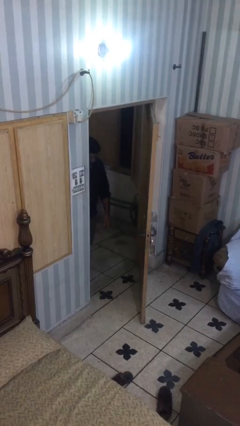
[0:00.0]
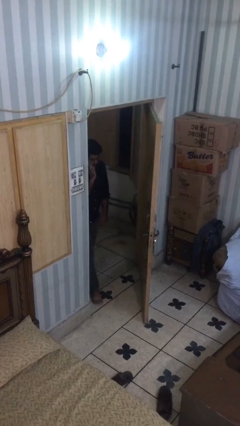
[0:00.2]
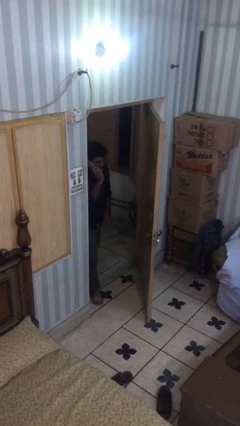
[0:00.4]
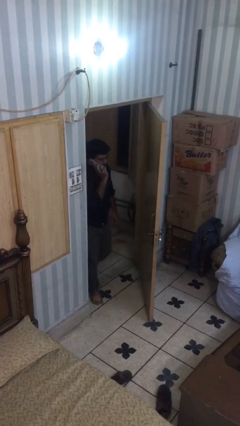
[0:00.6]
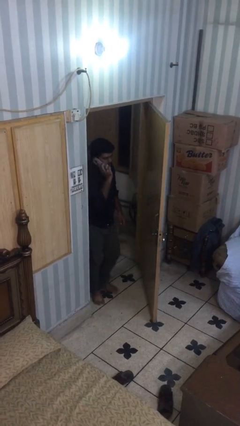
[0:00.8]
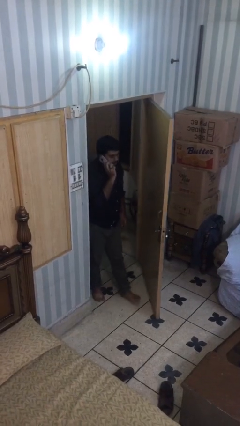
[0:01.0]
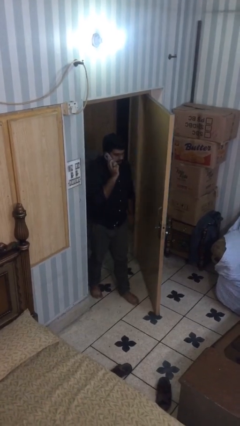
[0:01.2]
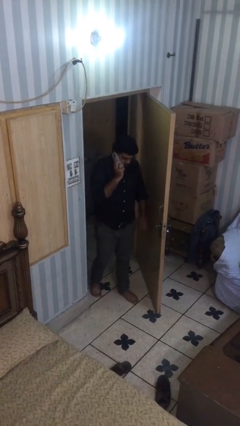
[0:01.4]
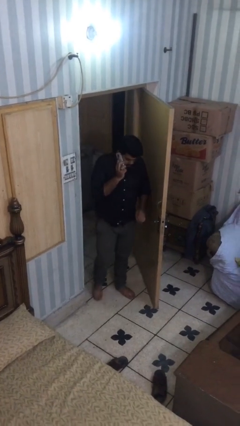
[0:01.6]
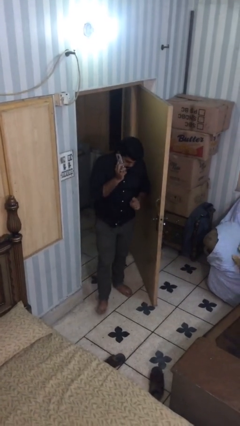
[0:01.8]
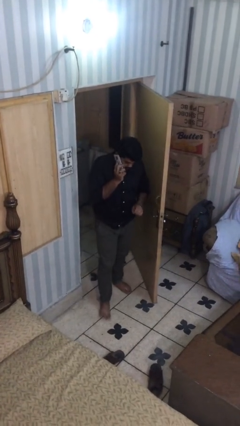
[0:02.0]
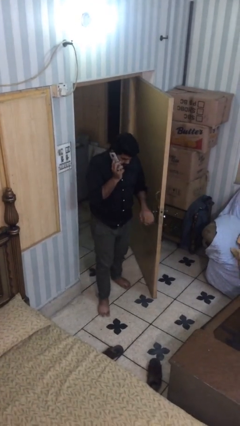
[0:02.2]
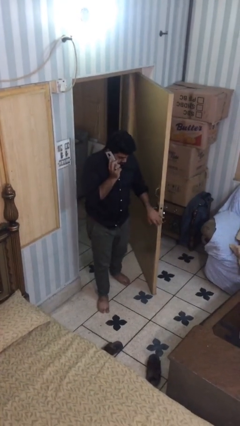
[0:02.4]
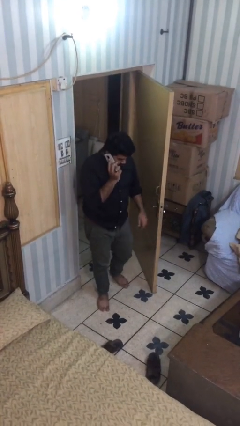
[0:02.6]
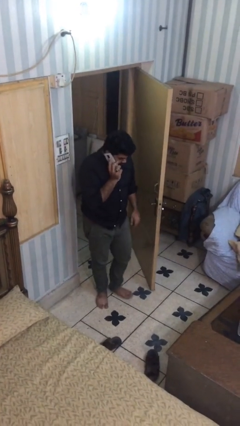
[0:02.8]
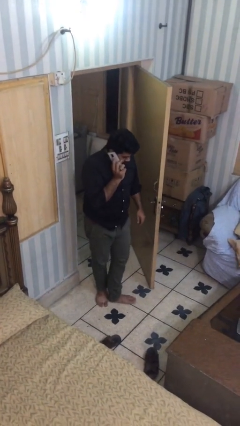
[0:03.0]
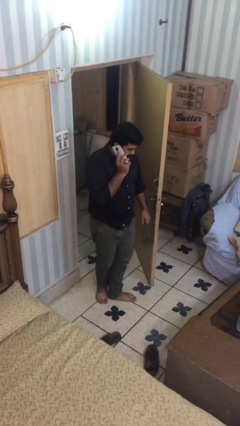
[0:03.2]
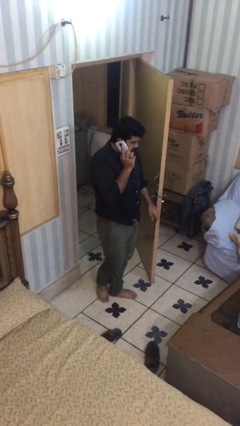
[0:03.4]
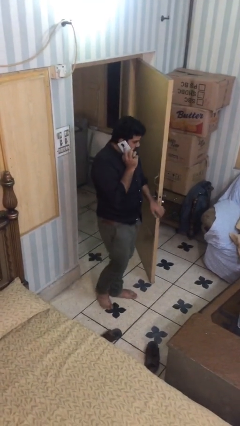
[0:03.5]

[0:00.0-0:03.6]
person enters scene through structure

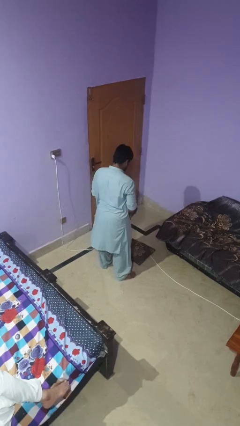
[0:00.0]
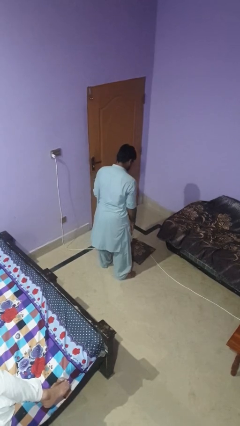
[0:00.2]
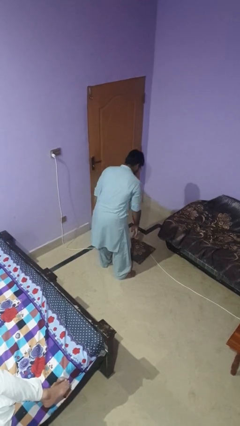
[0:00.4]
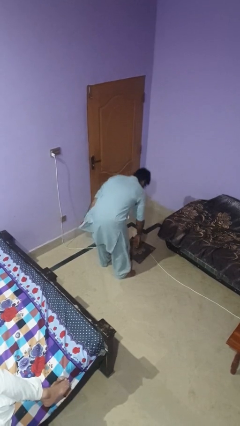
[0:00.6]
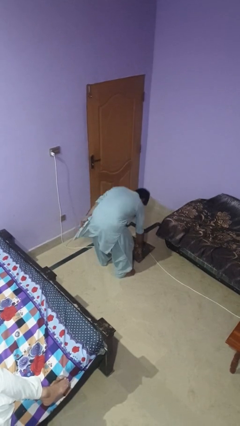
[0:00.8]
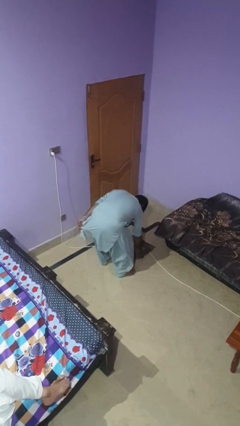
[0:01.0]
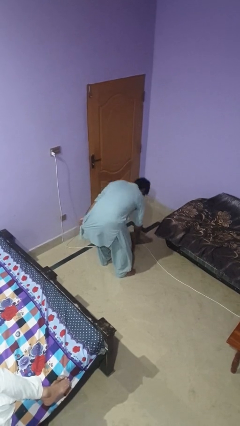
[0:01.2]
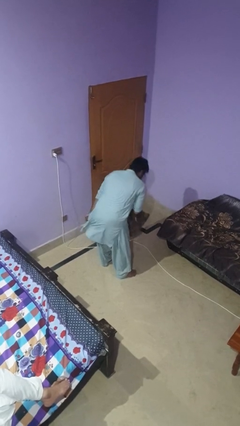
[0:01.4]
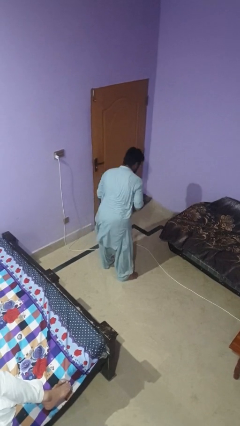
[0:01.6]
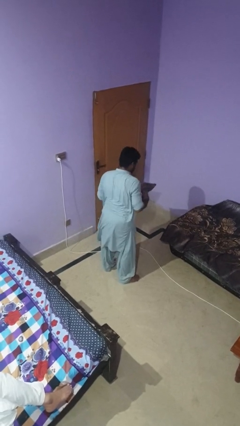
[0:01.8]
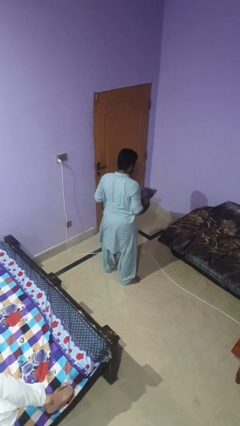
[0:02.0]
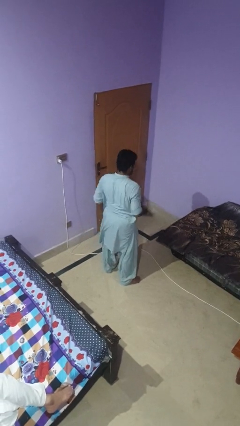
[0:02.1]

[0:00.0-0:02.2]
person picks up object from floor

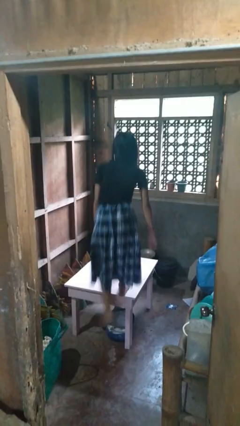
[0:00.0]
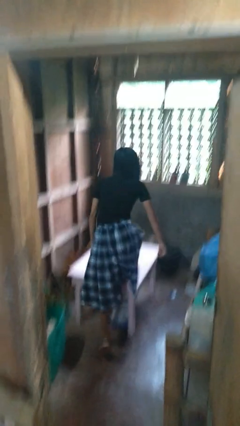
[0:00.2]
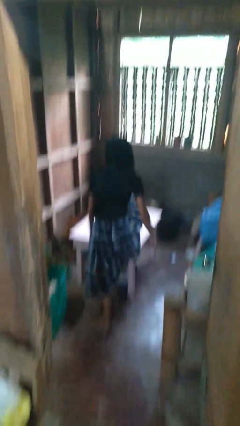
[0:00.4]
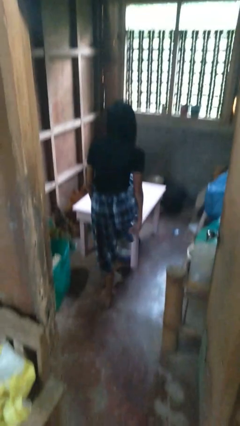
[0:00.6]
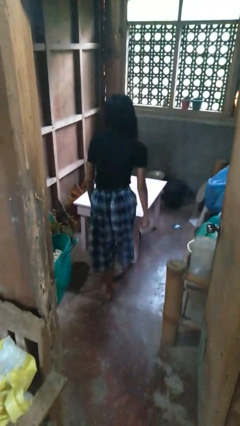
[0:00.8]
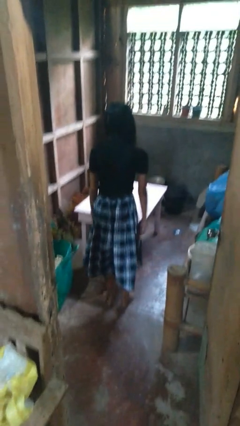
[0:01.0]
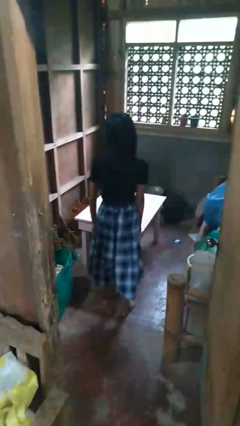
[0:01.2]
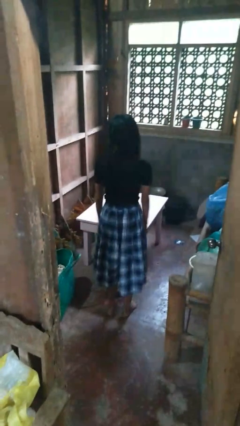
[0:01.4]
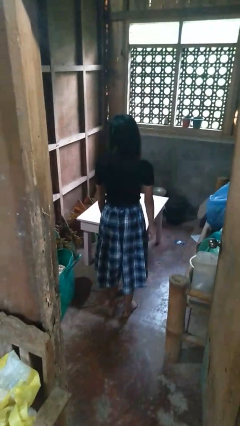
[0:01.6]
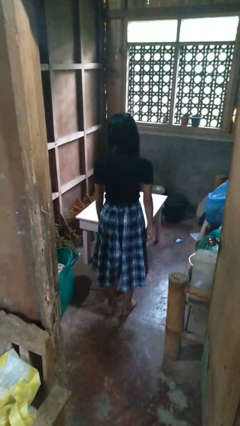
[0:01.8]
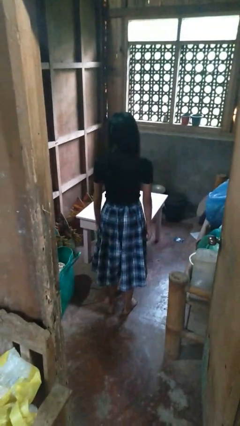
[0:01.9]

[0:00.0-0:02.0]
person climbs off table

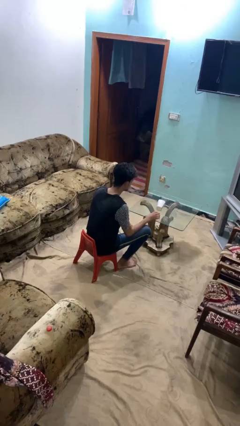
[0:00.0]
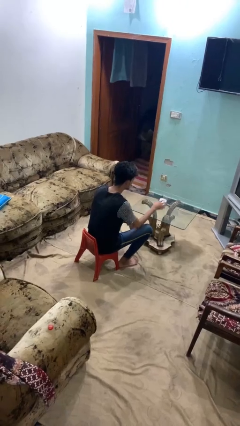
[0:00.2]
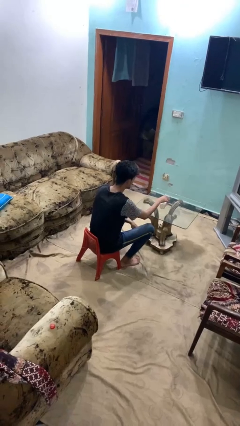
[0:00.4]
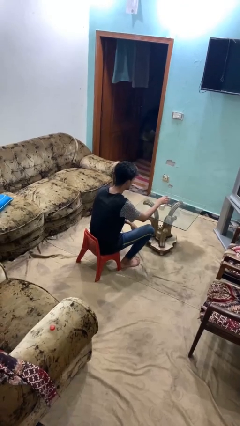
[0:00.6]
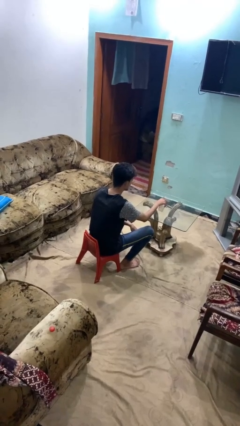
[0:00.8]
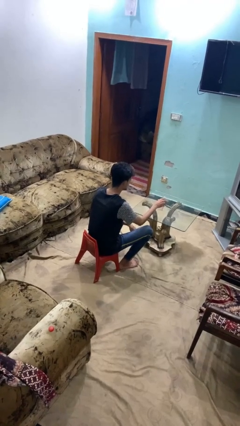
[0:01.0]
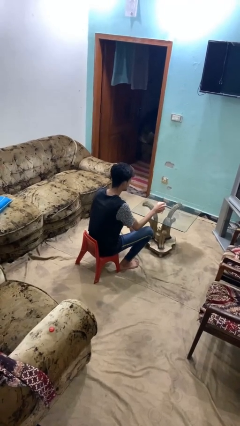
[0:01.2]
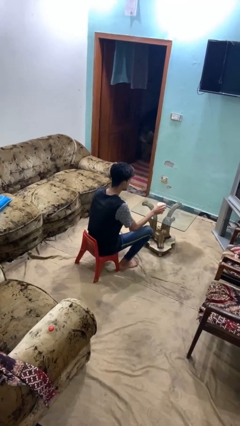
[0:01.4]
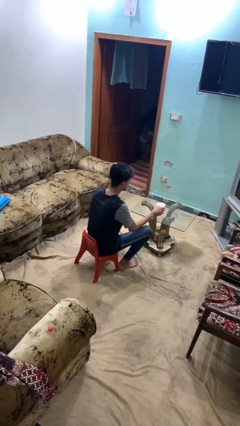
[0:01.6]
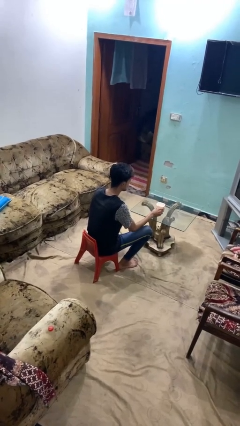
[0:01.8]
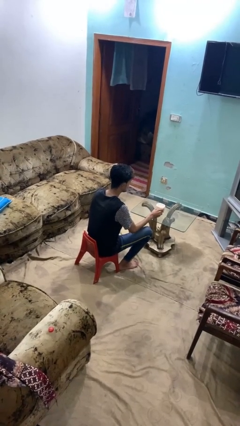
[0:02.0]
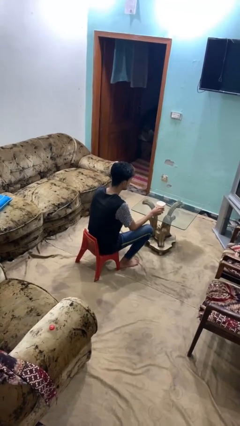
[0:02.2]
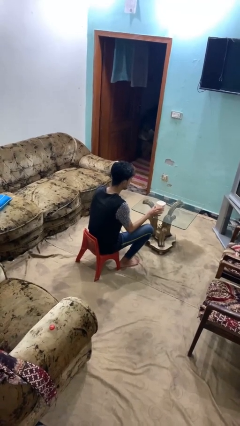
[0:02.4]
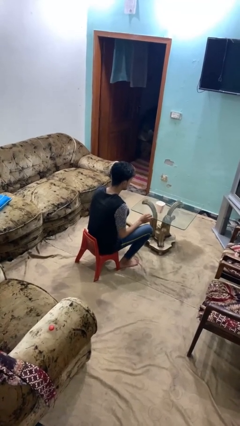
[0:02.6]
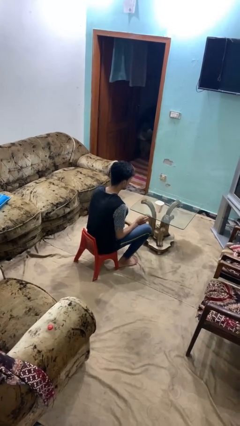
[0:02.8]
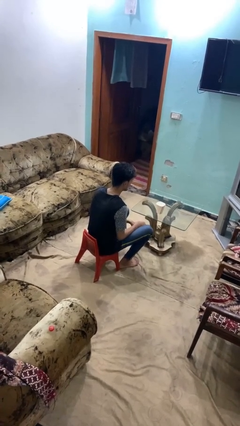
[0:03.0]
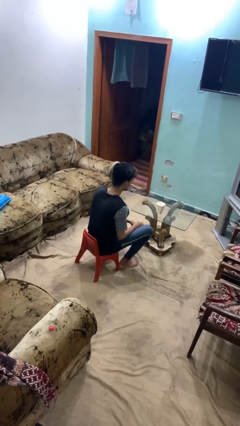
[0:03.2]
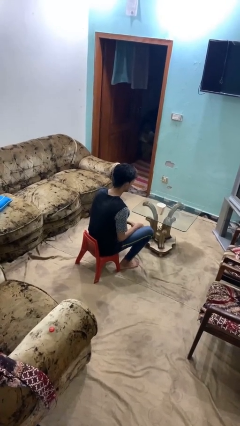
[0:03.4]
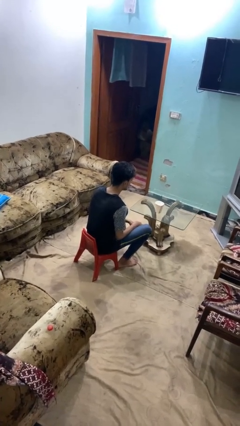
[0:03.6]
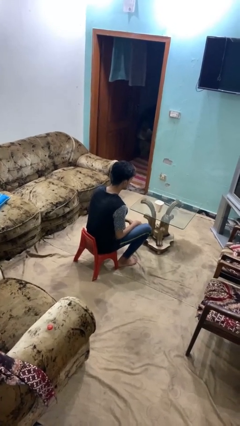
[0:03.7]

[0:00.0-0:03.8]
person sets upright glass

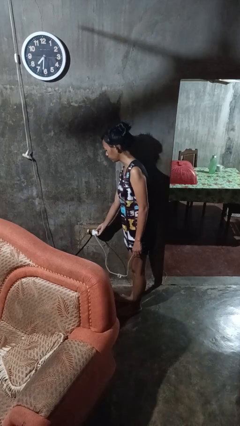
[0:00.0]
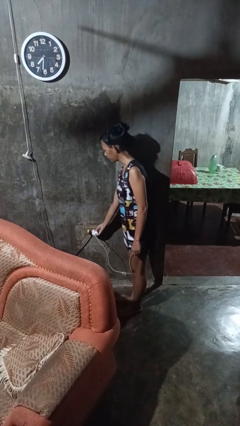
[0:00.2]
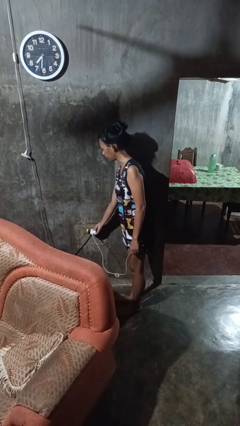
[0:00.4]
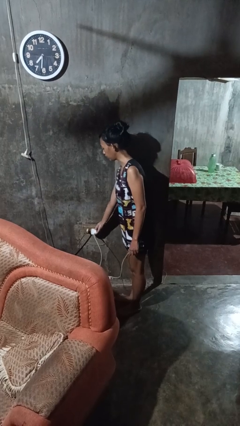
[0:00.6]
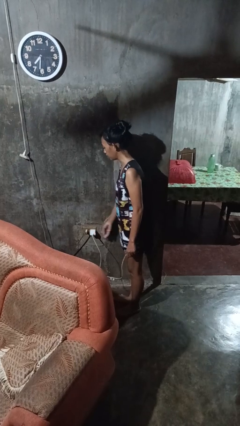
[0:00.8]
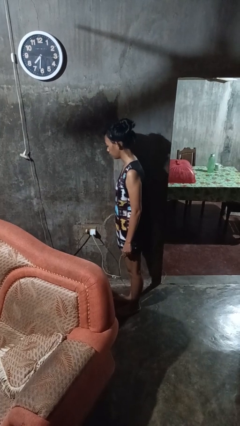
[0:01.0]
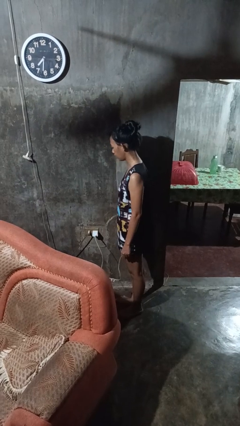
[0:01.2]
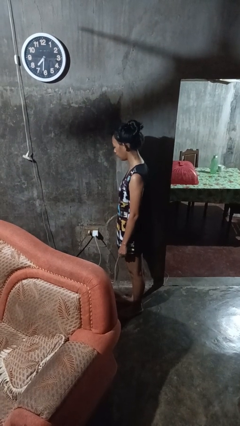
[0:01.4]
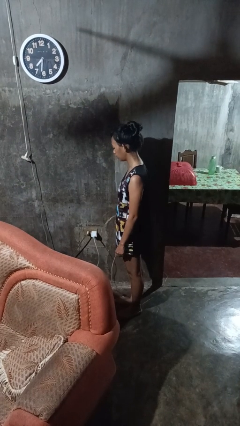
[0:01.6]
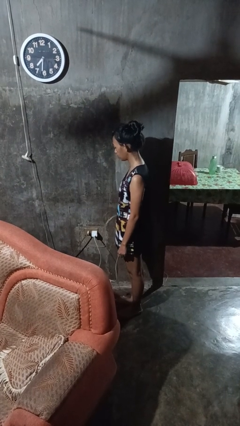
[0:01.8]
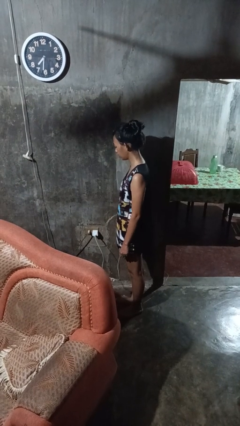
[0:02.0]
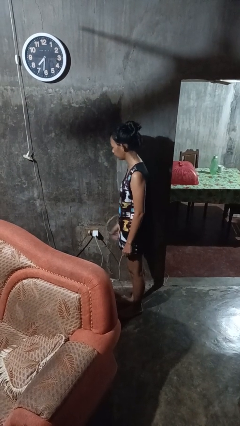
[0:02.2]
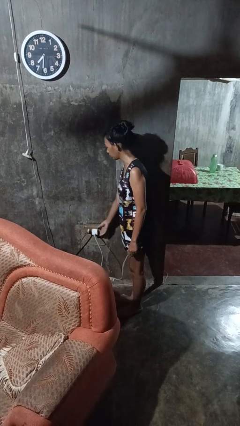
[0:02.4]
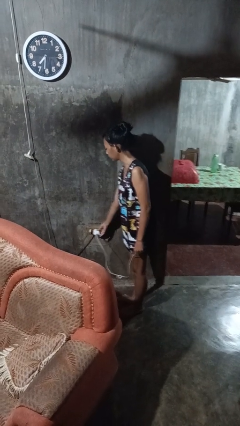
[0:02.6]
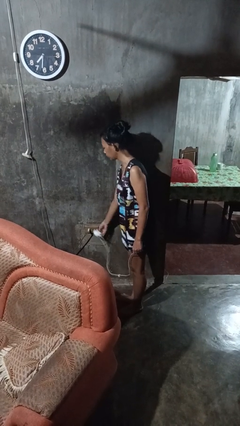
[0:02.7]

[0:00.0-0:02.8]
person plugs into electrical socket

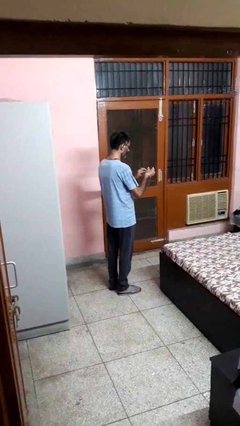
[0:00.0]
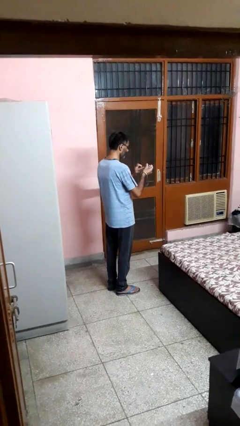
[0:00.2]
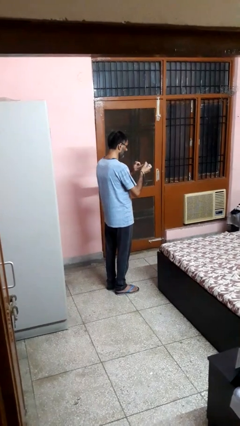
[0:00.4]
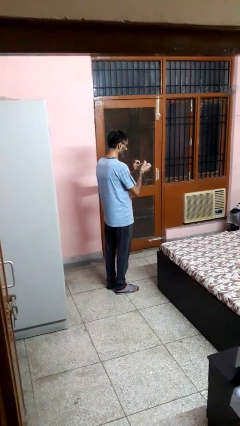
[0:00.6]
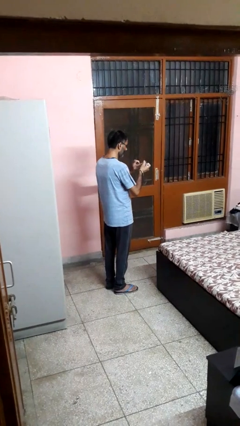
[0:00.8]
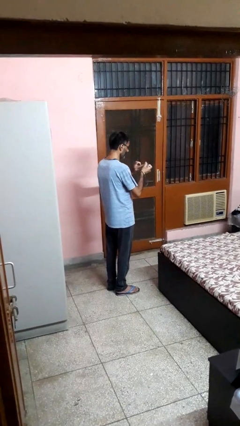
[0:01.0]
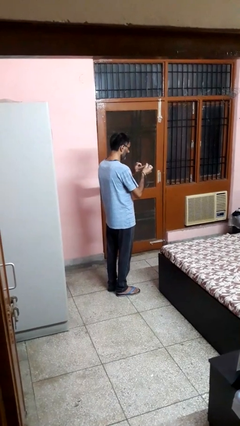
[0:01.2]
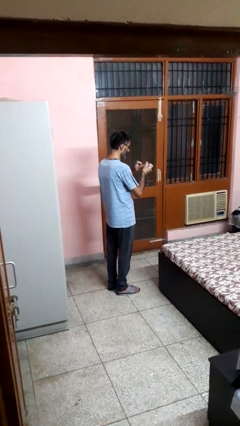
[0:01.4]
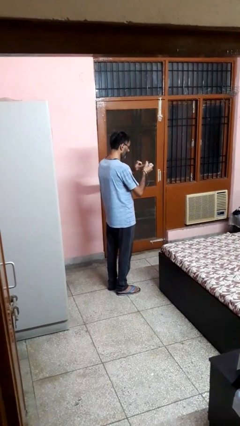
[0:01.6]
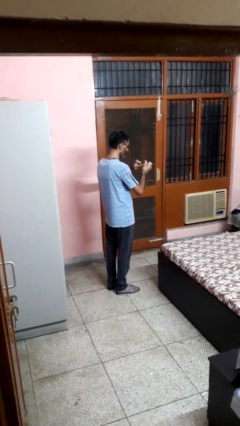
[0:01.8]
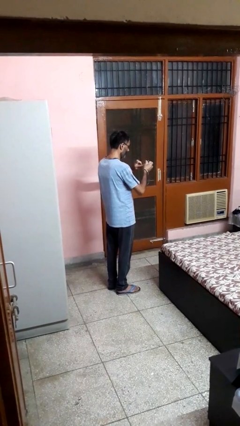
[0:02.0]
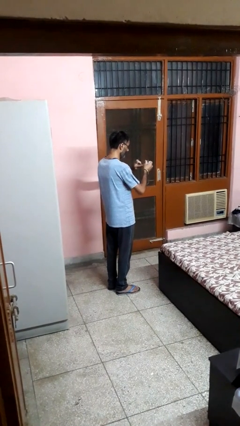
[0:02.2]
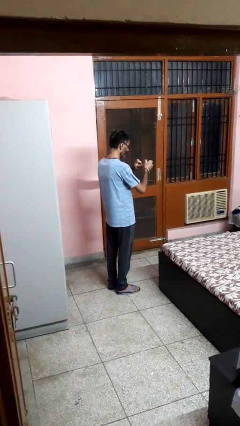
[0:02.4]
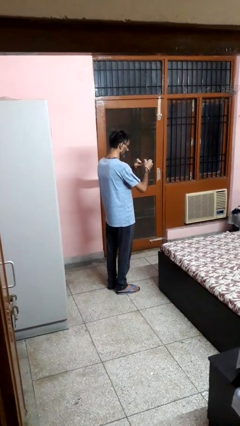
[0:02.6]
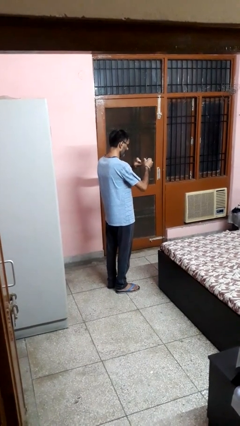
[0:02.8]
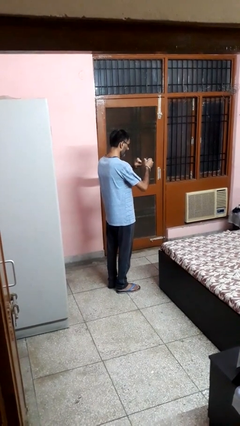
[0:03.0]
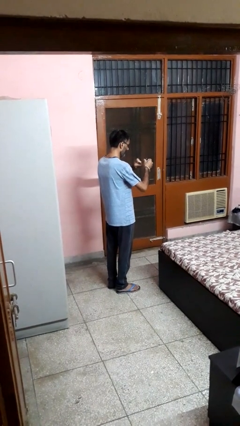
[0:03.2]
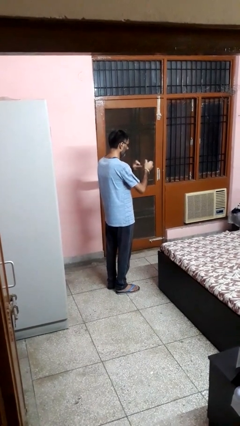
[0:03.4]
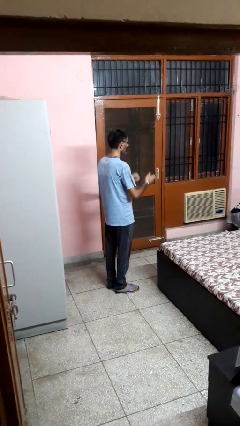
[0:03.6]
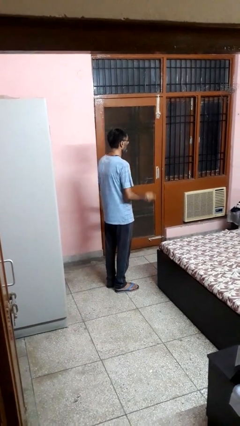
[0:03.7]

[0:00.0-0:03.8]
person clips fingernails
